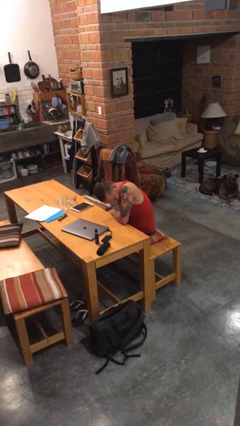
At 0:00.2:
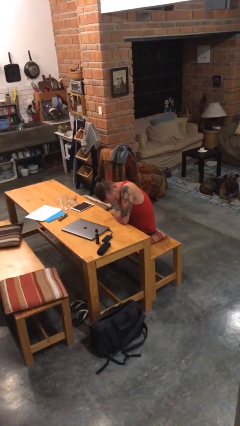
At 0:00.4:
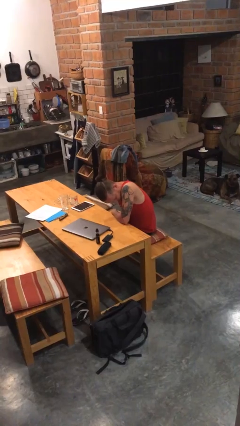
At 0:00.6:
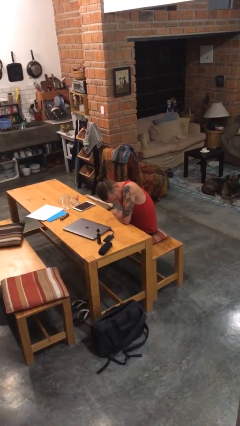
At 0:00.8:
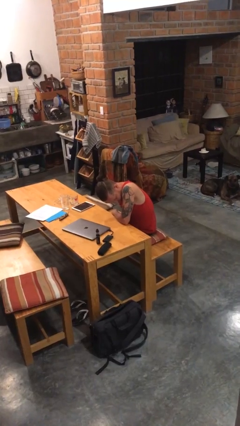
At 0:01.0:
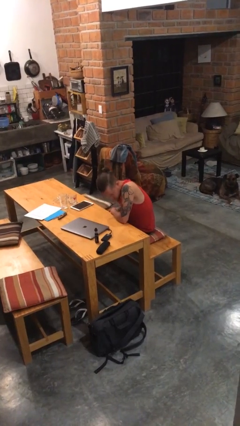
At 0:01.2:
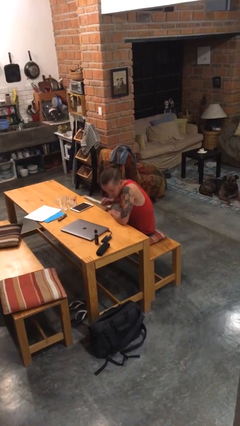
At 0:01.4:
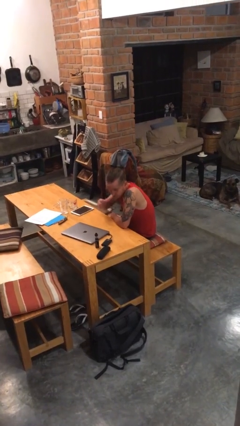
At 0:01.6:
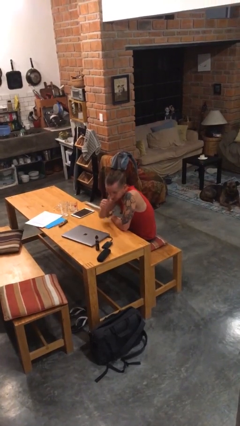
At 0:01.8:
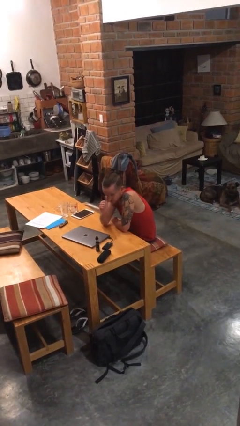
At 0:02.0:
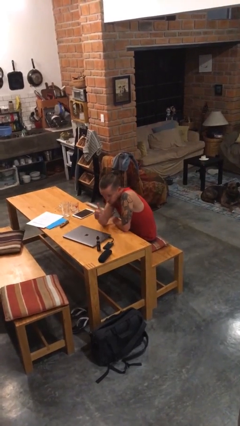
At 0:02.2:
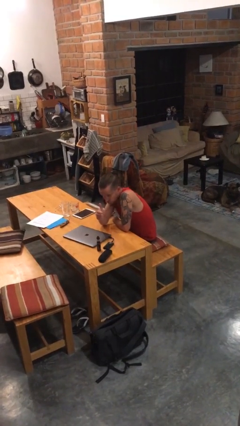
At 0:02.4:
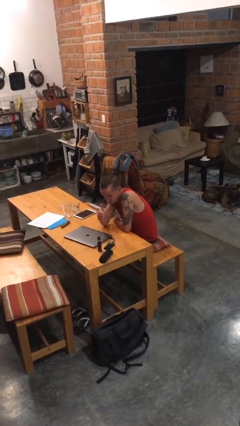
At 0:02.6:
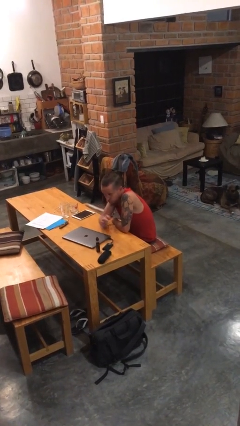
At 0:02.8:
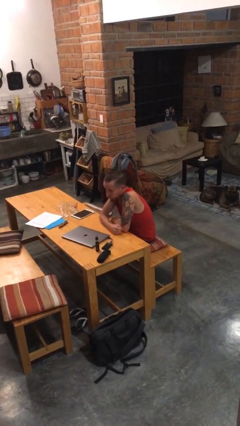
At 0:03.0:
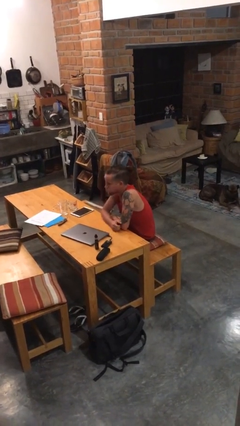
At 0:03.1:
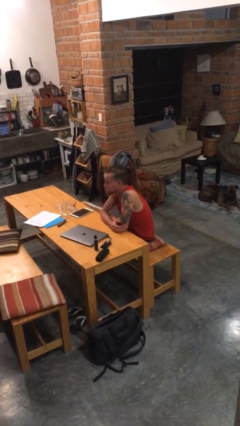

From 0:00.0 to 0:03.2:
person gestures thumbs up

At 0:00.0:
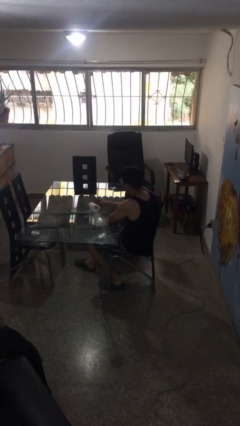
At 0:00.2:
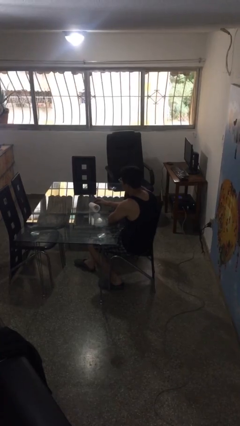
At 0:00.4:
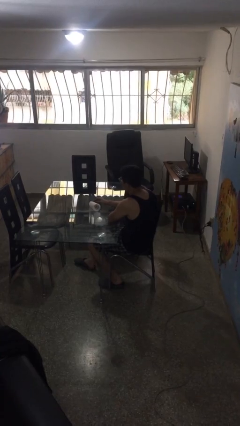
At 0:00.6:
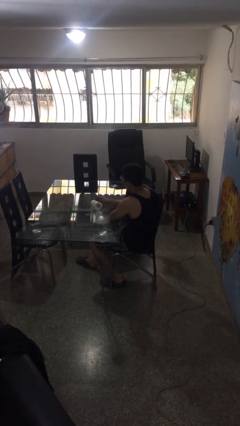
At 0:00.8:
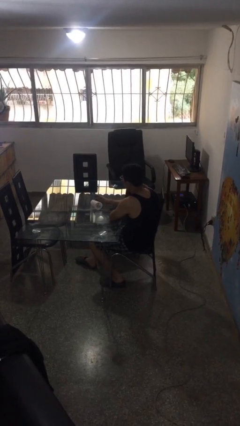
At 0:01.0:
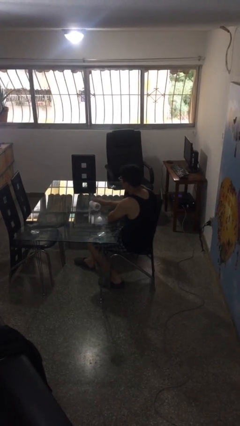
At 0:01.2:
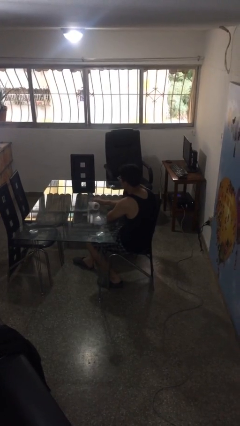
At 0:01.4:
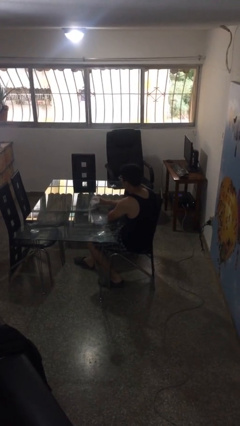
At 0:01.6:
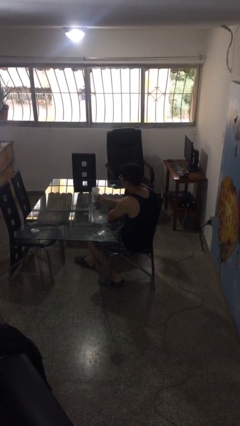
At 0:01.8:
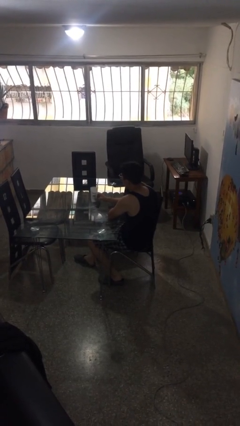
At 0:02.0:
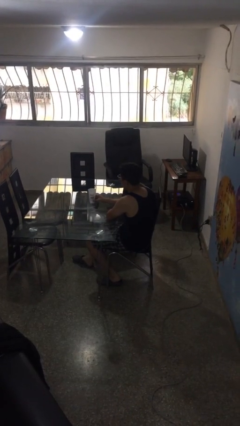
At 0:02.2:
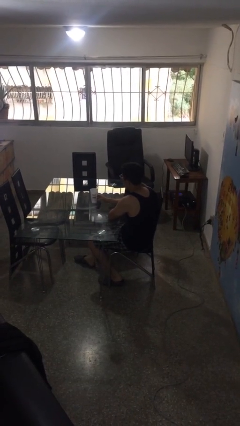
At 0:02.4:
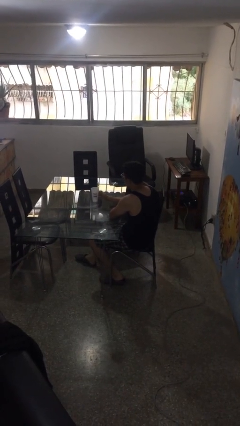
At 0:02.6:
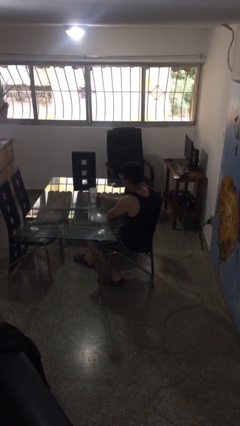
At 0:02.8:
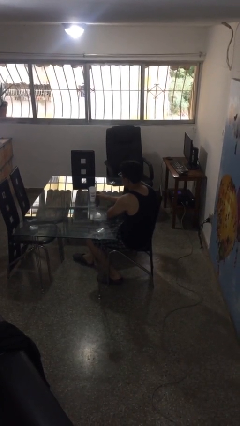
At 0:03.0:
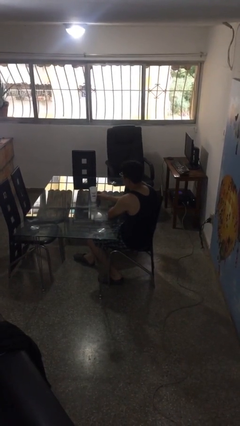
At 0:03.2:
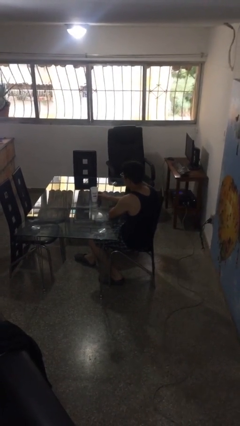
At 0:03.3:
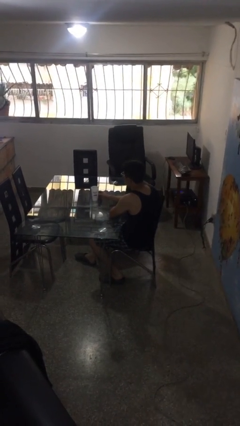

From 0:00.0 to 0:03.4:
person sets upright glass

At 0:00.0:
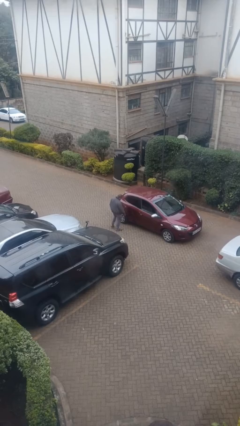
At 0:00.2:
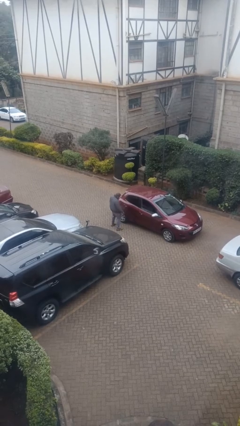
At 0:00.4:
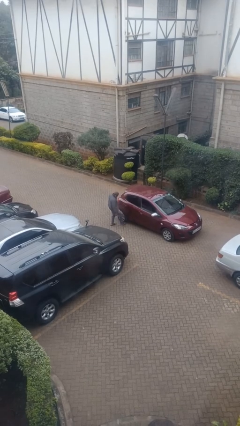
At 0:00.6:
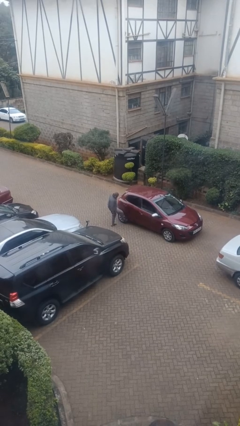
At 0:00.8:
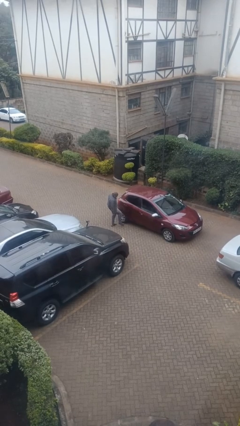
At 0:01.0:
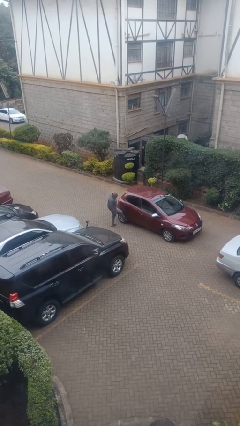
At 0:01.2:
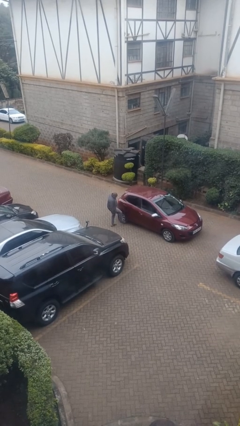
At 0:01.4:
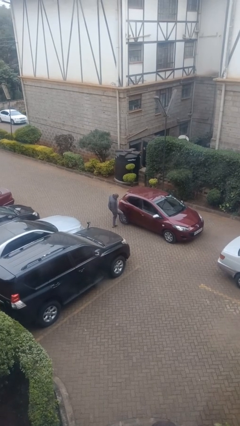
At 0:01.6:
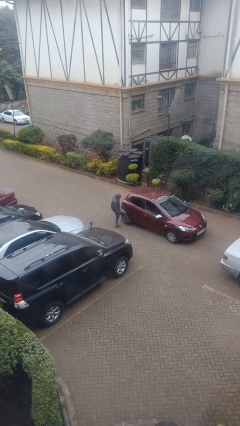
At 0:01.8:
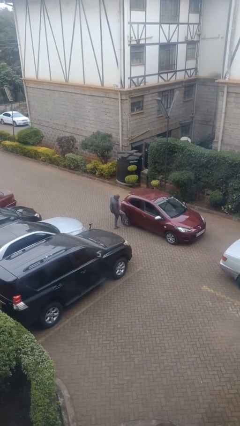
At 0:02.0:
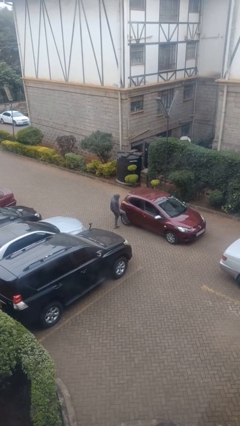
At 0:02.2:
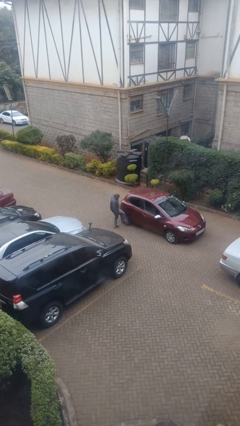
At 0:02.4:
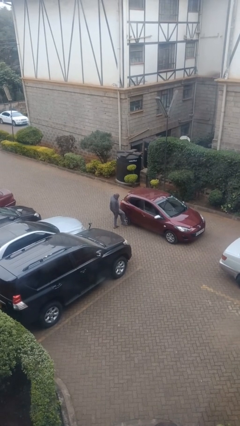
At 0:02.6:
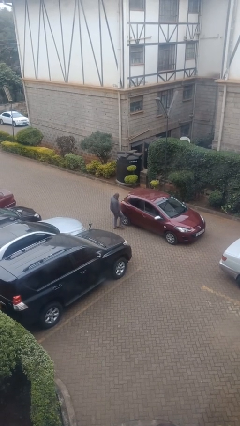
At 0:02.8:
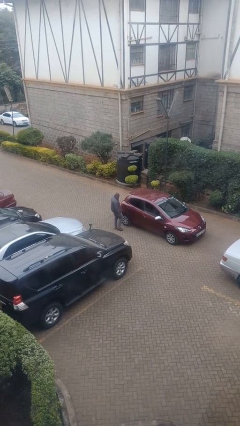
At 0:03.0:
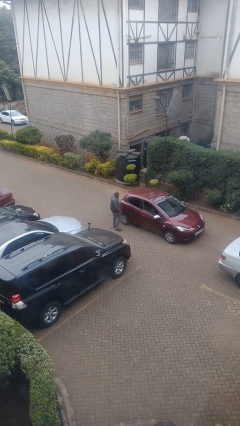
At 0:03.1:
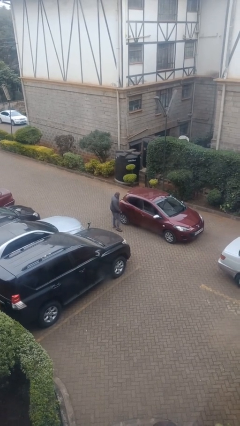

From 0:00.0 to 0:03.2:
person kicks car tires

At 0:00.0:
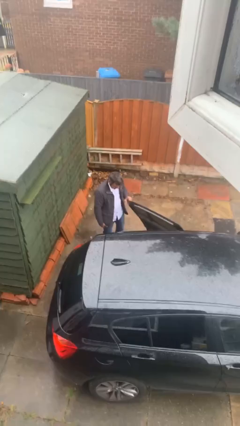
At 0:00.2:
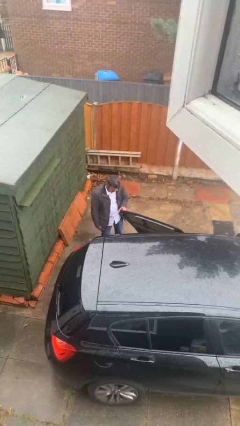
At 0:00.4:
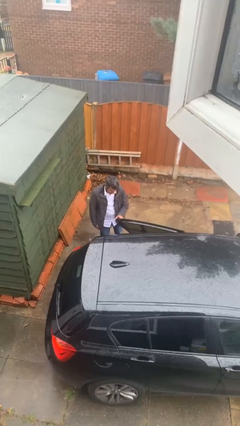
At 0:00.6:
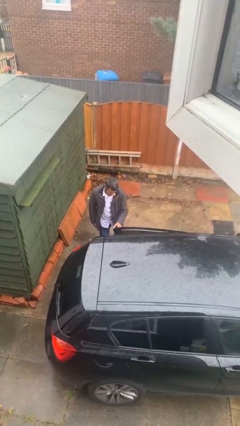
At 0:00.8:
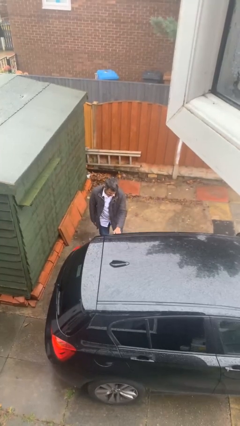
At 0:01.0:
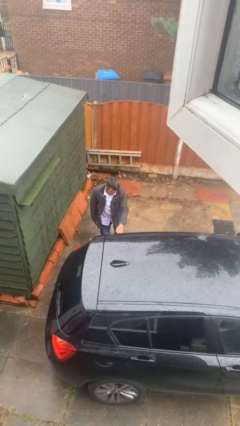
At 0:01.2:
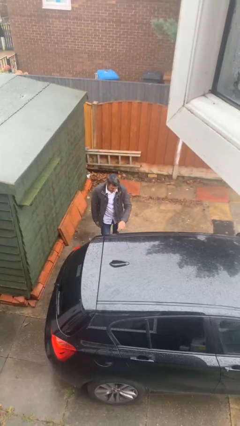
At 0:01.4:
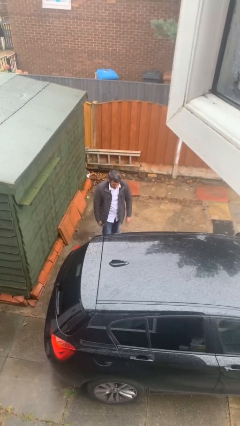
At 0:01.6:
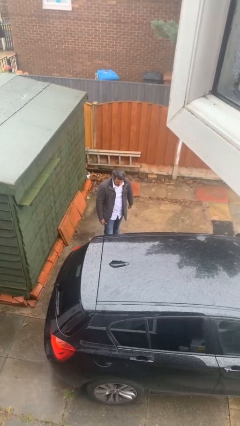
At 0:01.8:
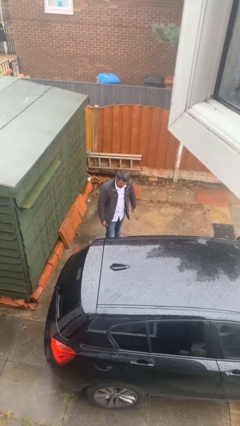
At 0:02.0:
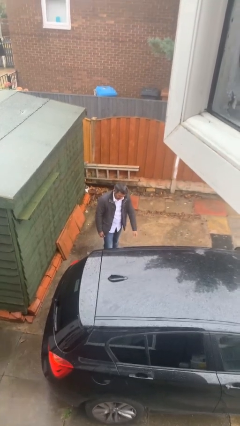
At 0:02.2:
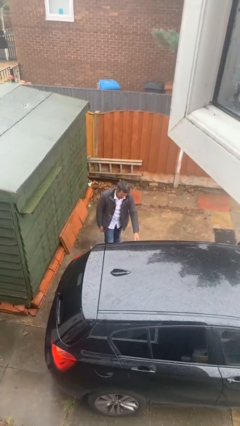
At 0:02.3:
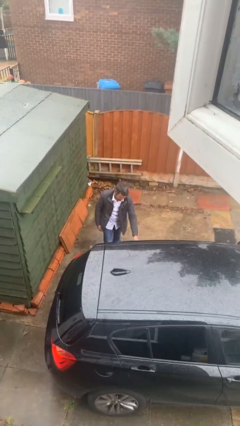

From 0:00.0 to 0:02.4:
person closes car door

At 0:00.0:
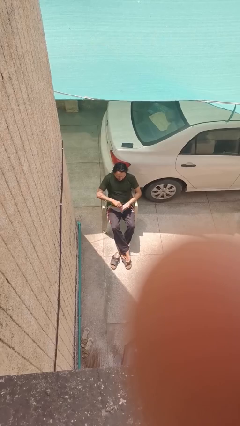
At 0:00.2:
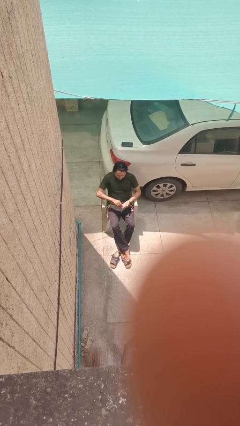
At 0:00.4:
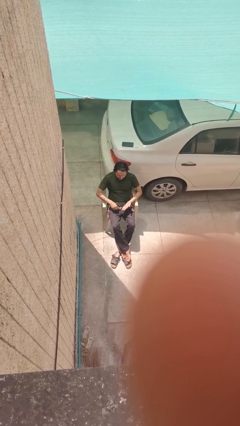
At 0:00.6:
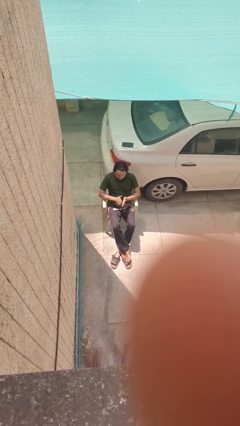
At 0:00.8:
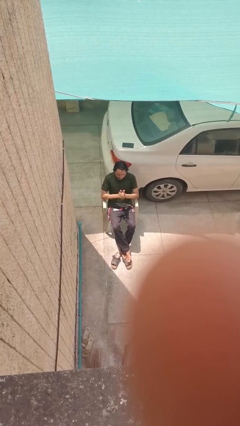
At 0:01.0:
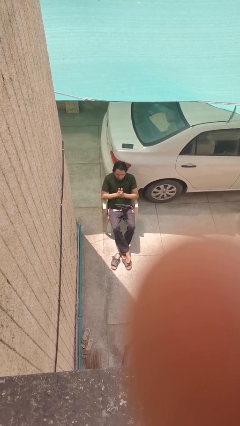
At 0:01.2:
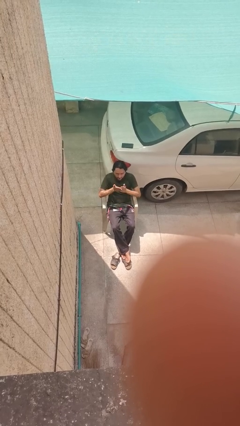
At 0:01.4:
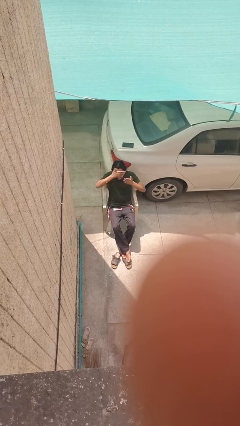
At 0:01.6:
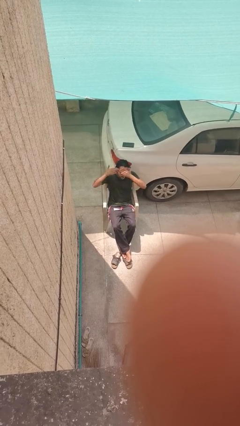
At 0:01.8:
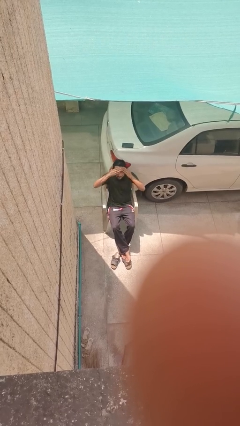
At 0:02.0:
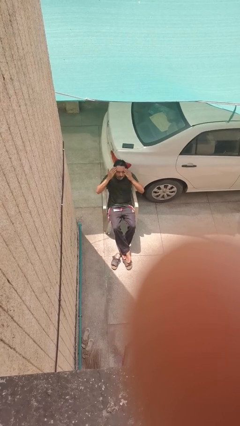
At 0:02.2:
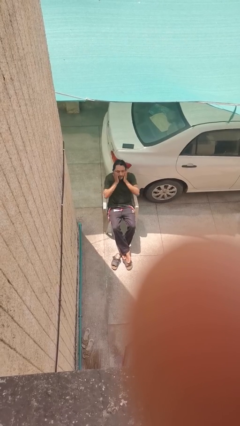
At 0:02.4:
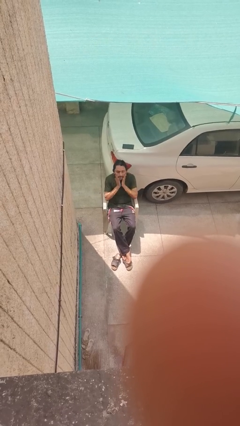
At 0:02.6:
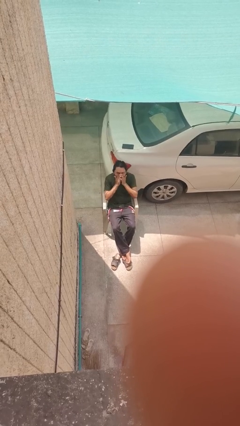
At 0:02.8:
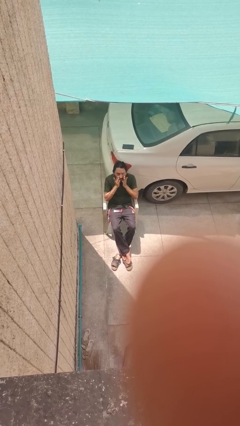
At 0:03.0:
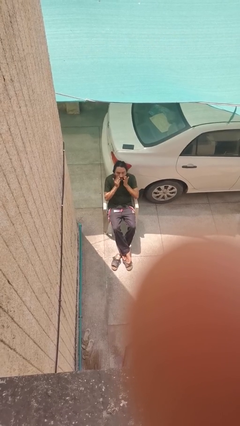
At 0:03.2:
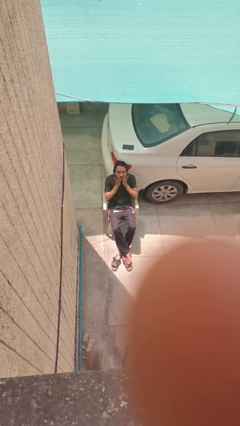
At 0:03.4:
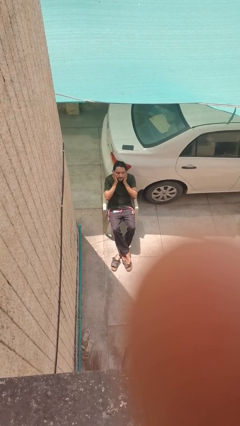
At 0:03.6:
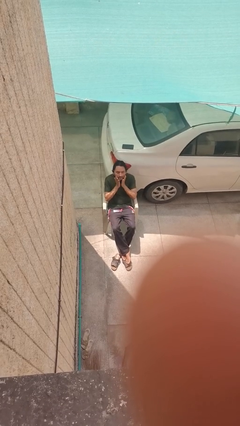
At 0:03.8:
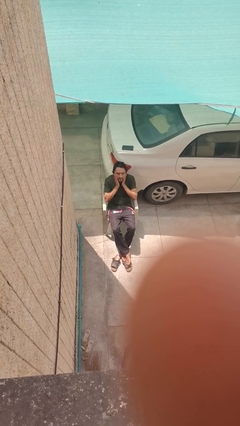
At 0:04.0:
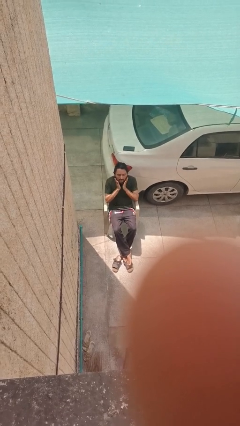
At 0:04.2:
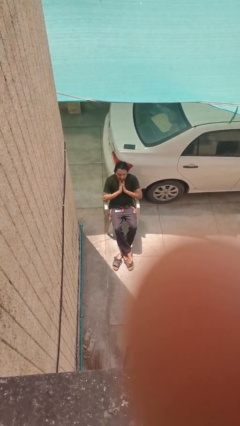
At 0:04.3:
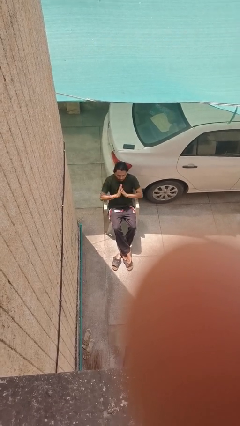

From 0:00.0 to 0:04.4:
person applies facial moisturizer

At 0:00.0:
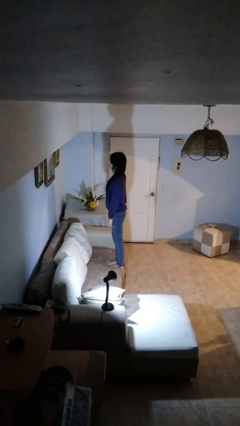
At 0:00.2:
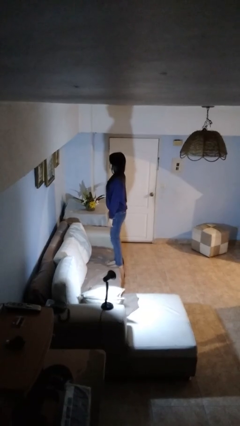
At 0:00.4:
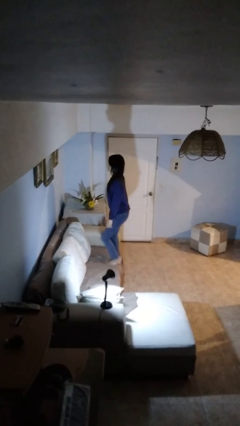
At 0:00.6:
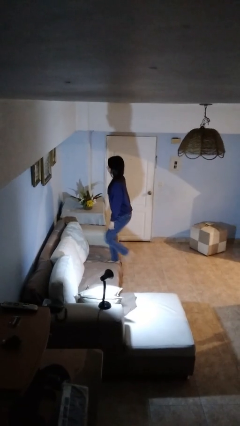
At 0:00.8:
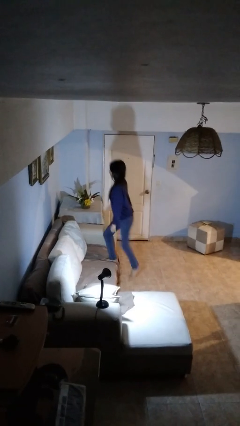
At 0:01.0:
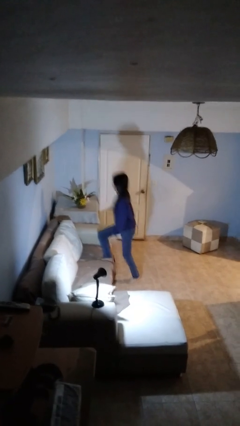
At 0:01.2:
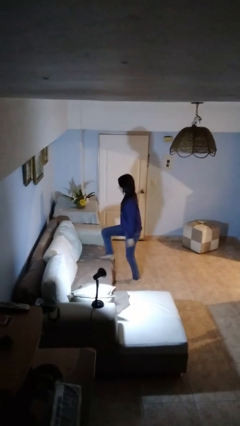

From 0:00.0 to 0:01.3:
person climbs off couch
